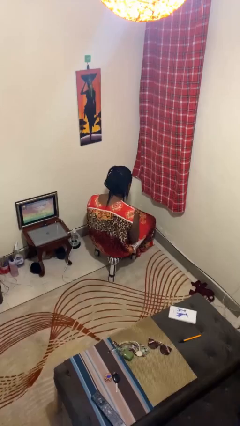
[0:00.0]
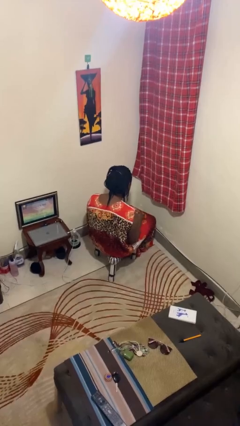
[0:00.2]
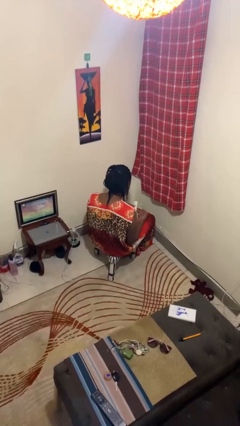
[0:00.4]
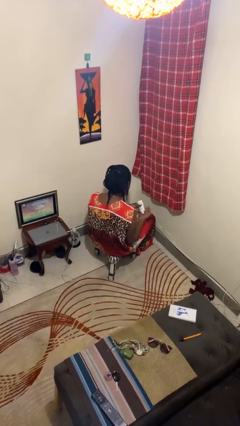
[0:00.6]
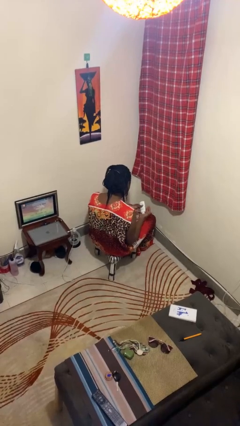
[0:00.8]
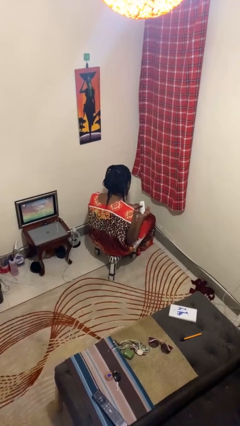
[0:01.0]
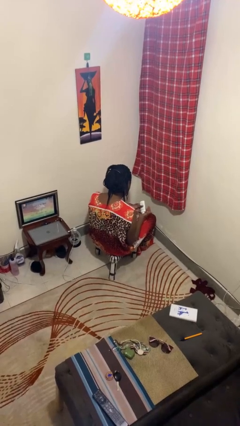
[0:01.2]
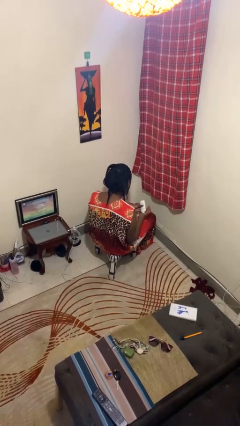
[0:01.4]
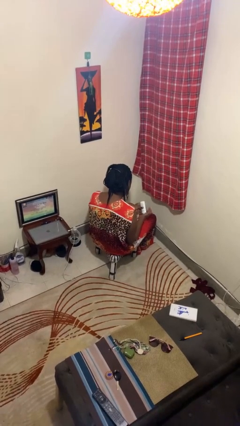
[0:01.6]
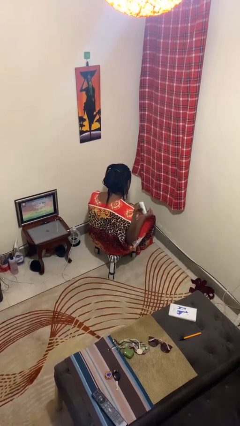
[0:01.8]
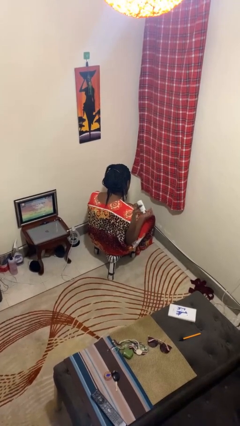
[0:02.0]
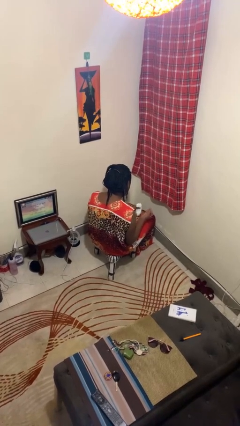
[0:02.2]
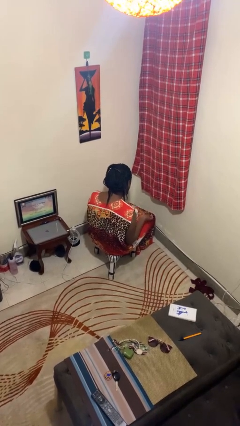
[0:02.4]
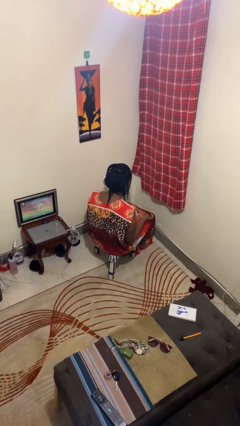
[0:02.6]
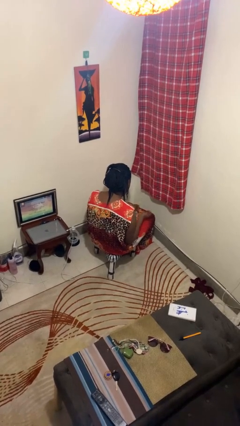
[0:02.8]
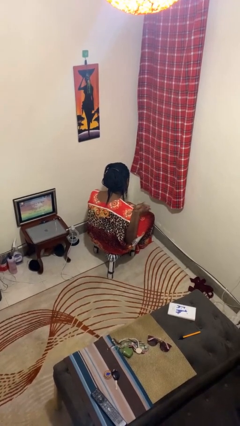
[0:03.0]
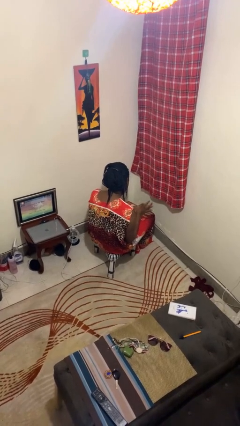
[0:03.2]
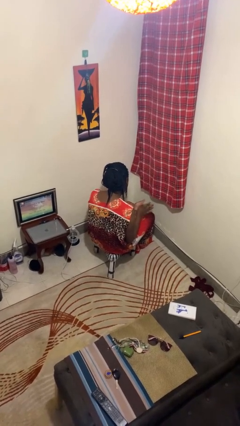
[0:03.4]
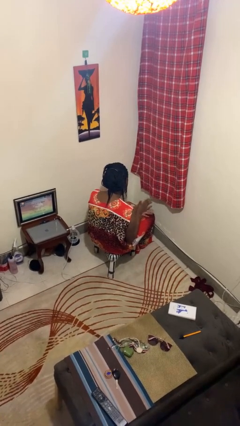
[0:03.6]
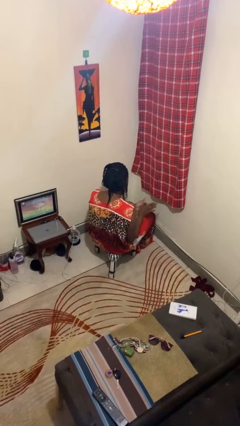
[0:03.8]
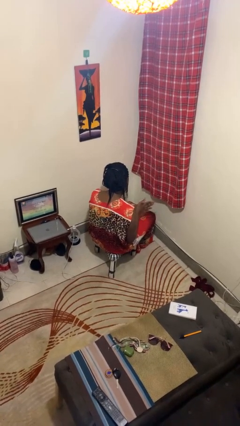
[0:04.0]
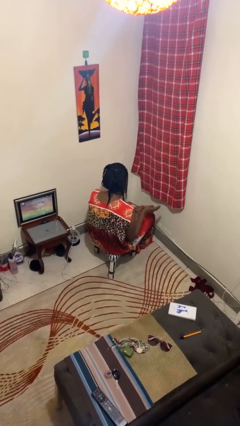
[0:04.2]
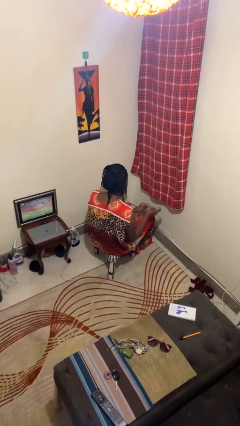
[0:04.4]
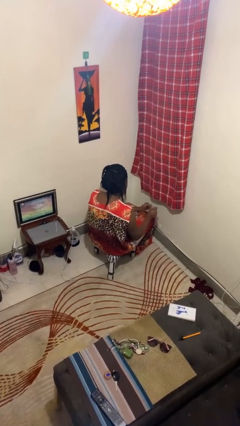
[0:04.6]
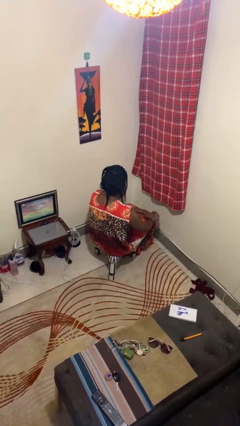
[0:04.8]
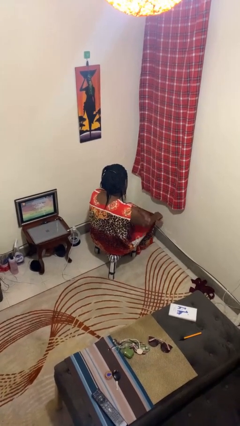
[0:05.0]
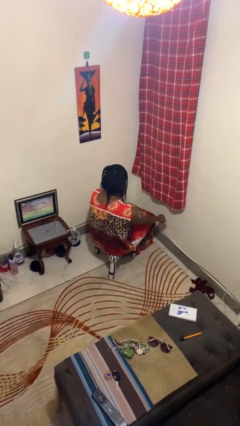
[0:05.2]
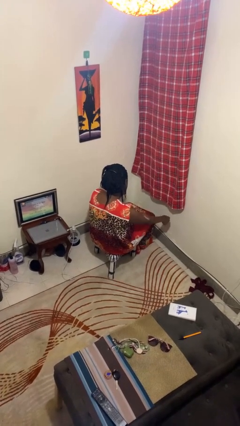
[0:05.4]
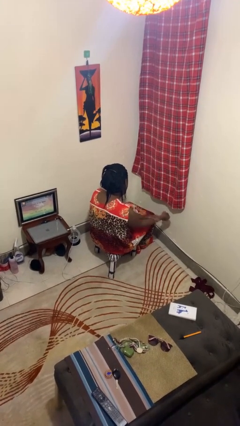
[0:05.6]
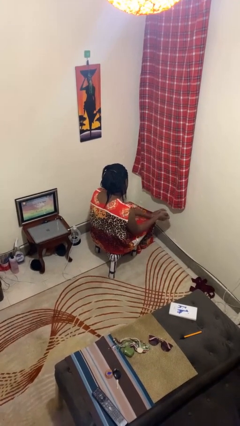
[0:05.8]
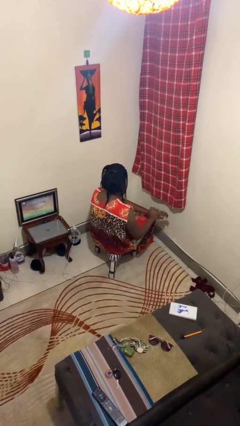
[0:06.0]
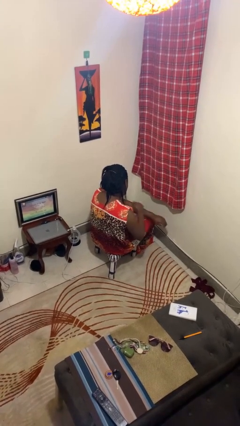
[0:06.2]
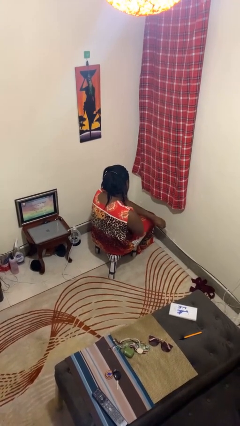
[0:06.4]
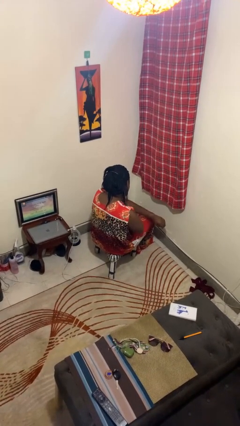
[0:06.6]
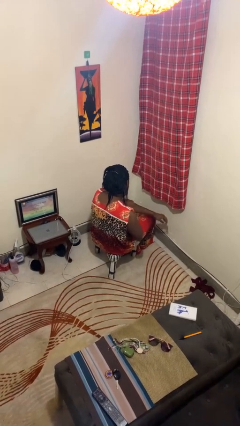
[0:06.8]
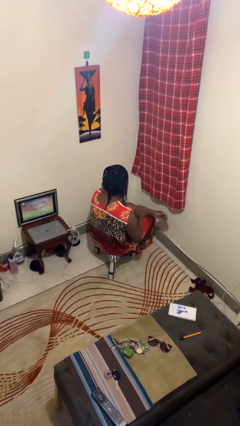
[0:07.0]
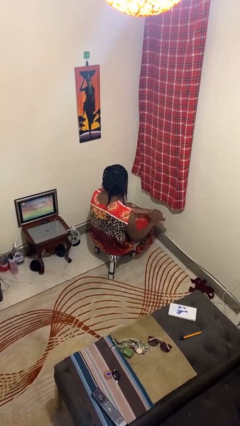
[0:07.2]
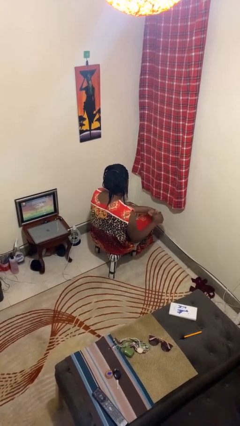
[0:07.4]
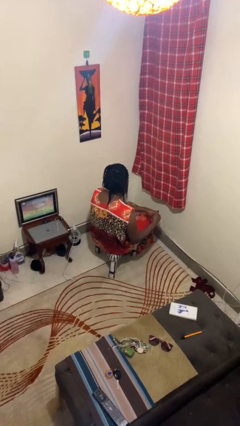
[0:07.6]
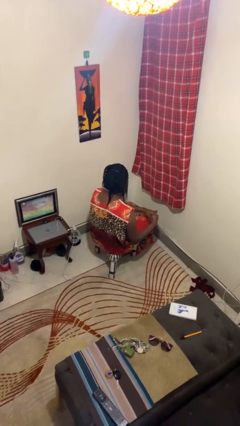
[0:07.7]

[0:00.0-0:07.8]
person applies sunscreen

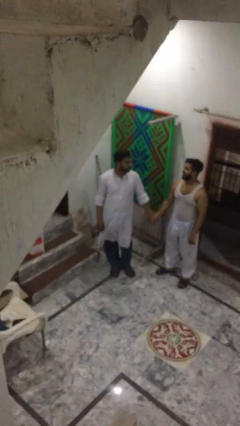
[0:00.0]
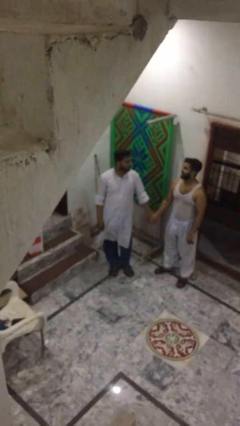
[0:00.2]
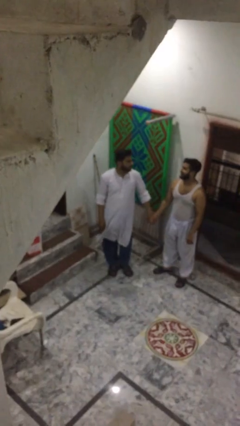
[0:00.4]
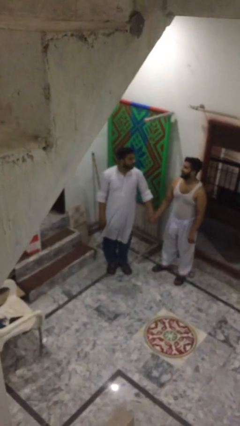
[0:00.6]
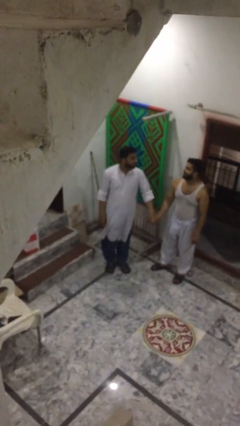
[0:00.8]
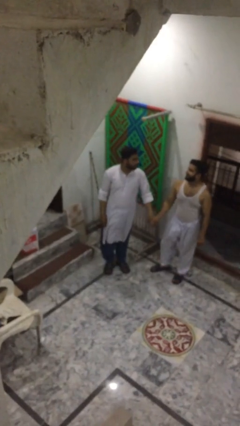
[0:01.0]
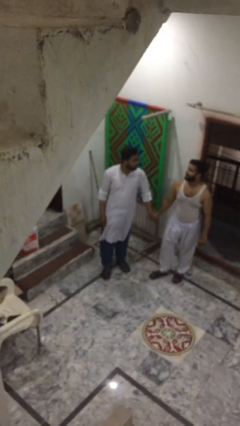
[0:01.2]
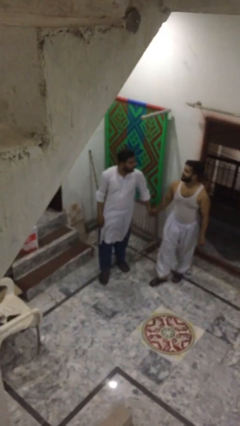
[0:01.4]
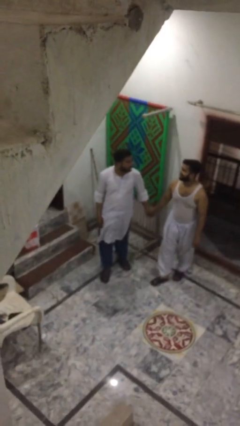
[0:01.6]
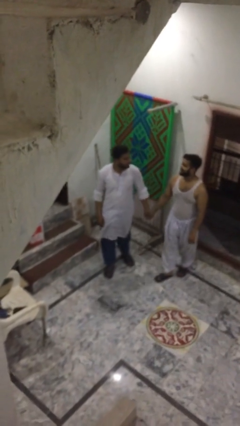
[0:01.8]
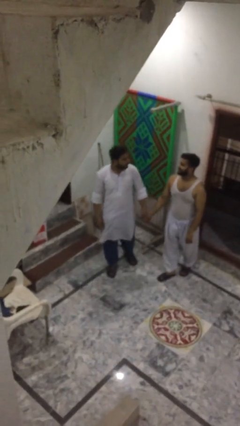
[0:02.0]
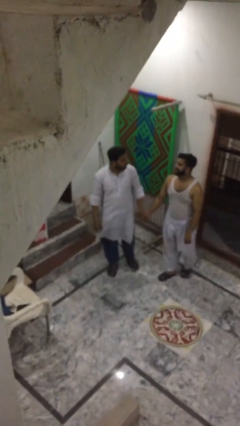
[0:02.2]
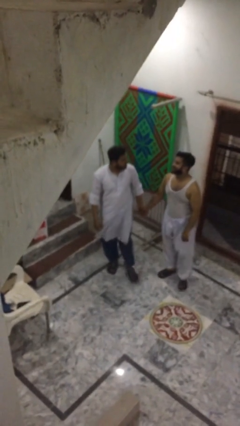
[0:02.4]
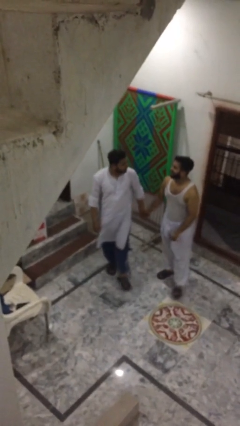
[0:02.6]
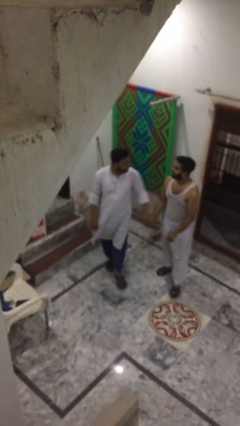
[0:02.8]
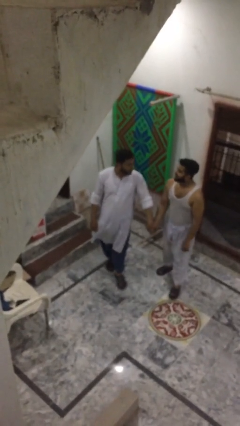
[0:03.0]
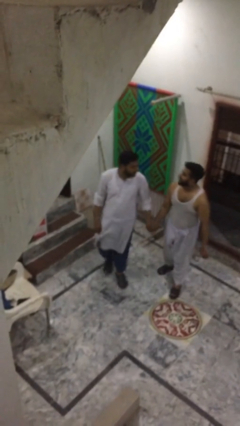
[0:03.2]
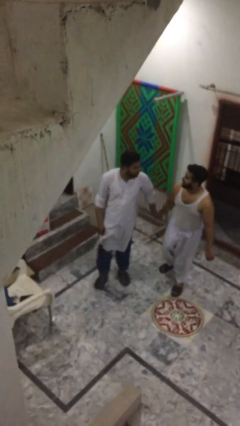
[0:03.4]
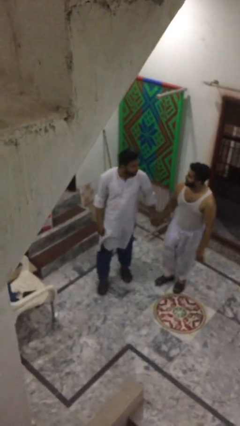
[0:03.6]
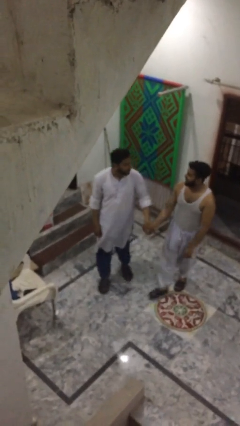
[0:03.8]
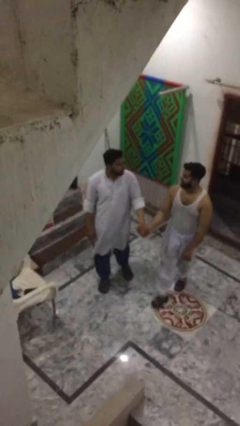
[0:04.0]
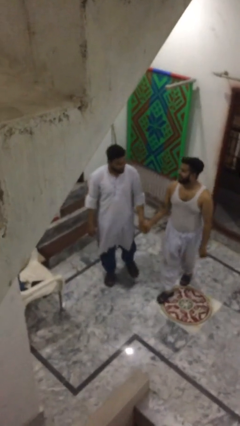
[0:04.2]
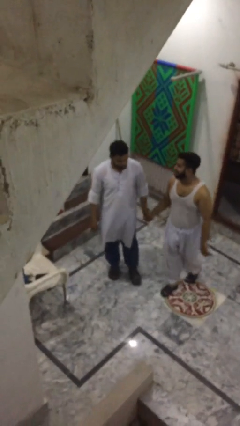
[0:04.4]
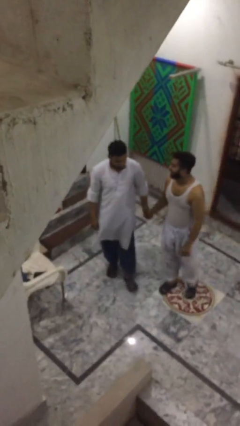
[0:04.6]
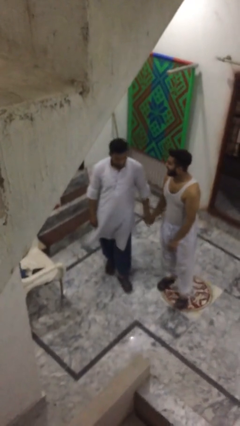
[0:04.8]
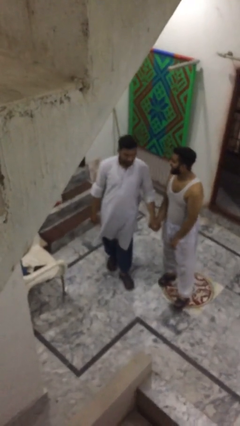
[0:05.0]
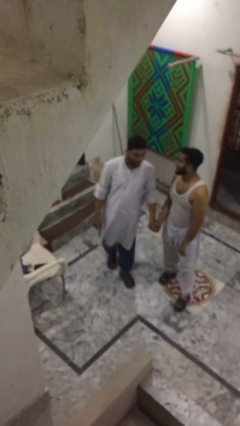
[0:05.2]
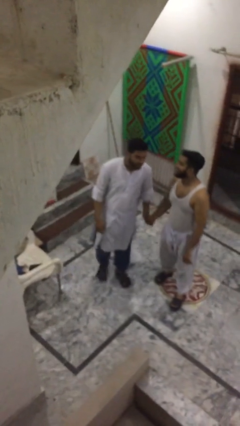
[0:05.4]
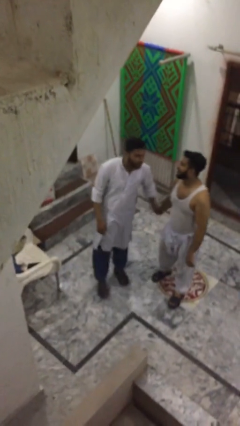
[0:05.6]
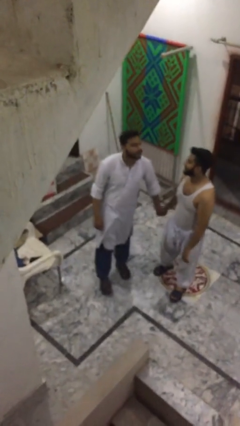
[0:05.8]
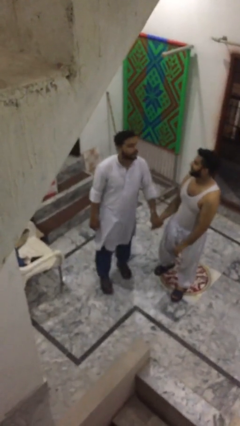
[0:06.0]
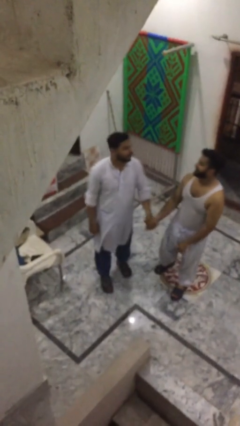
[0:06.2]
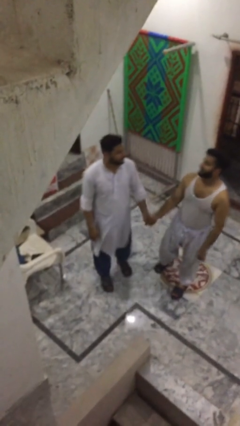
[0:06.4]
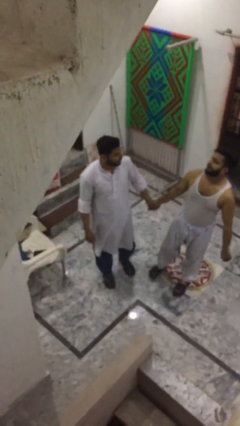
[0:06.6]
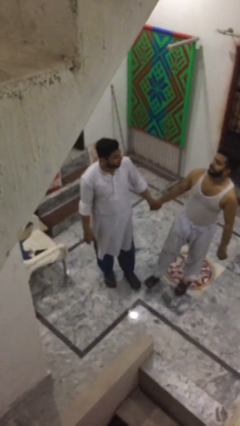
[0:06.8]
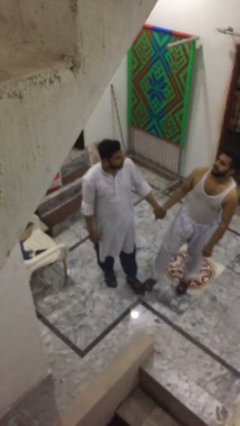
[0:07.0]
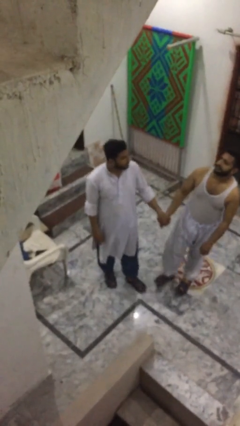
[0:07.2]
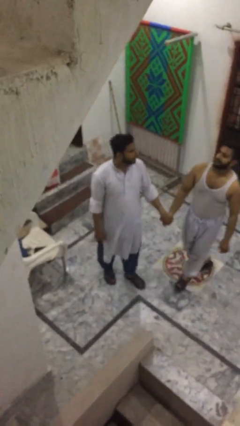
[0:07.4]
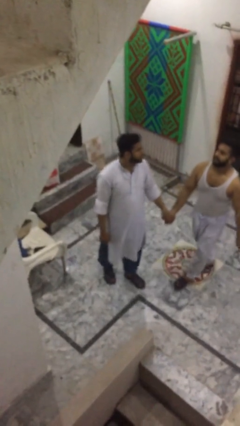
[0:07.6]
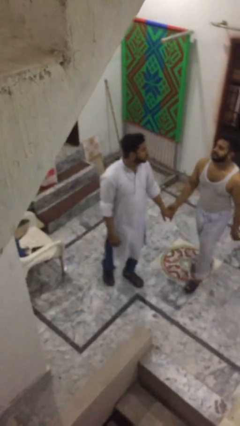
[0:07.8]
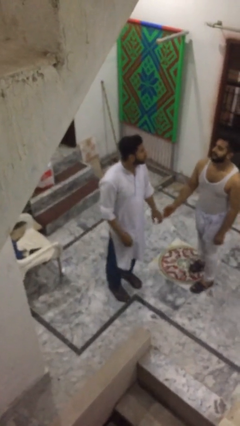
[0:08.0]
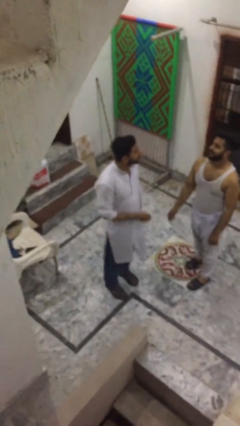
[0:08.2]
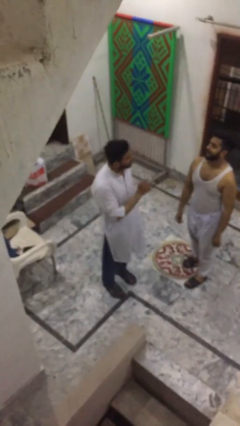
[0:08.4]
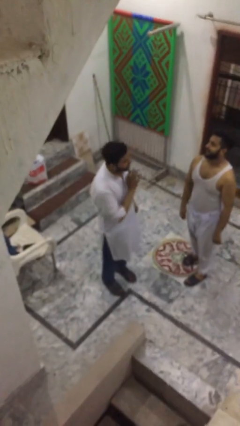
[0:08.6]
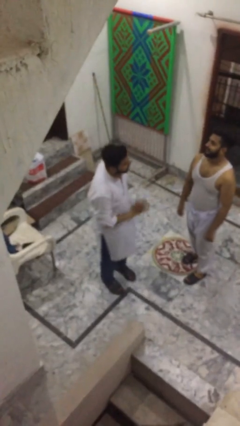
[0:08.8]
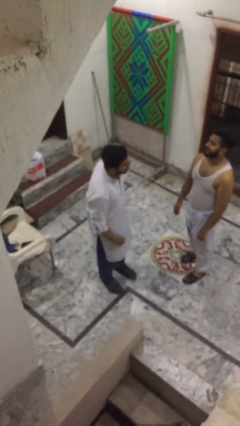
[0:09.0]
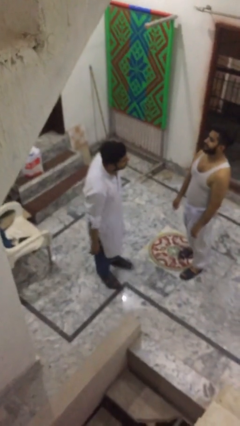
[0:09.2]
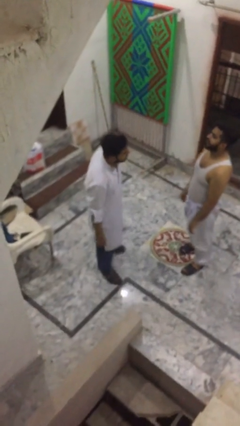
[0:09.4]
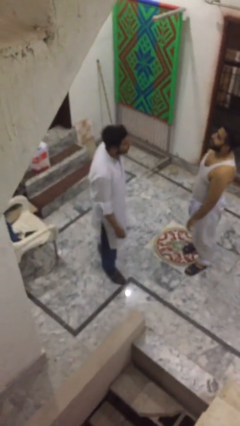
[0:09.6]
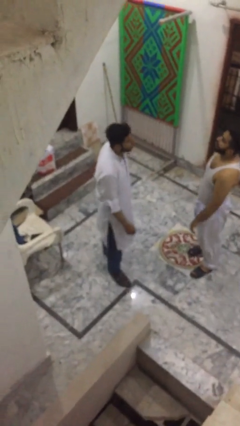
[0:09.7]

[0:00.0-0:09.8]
person holds hand

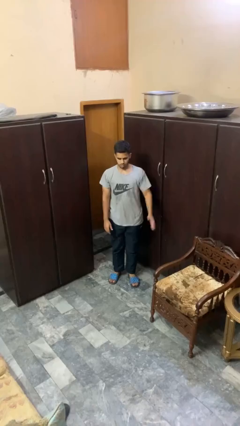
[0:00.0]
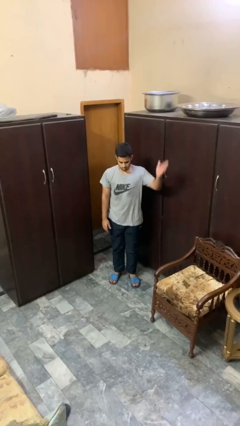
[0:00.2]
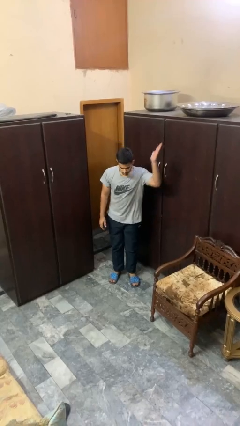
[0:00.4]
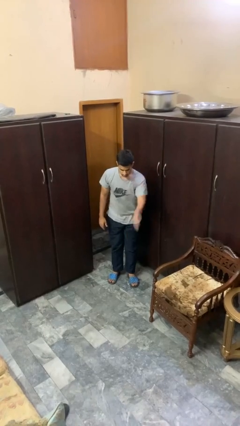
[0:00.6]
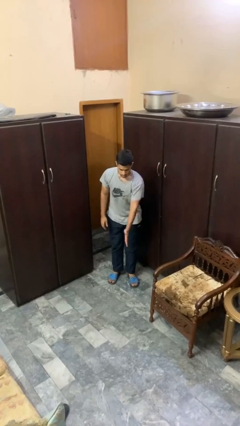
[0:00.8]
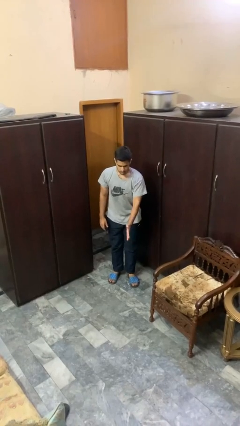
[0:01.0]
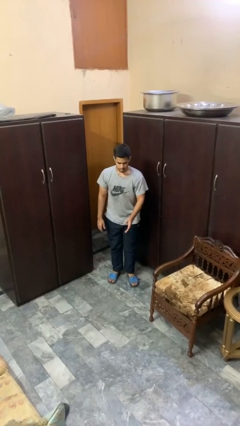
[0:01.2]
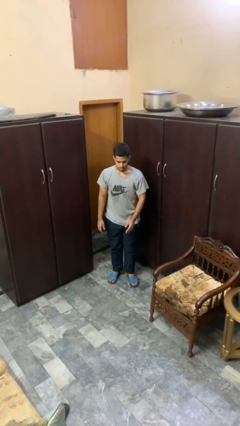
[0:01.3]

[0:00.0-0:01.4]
person karate chop
